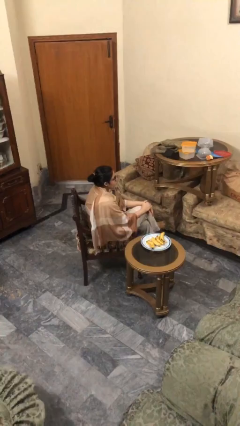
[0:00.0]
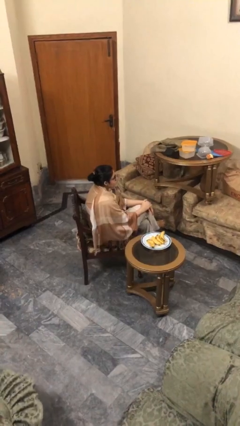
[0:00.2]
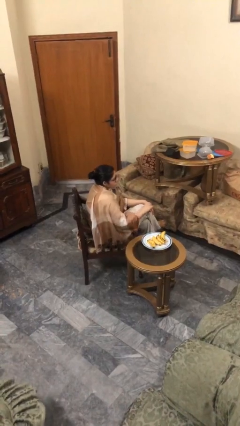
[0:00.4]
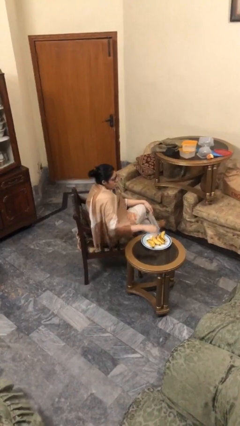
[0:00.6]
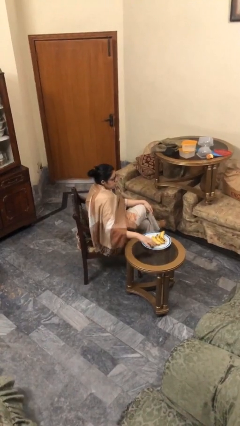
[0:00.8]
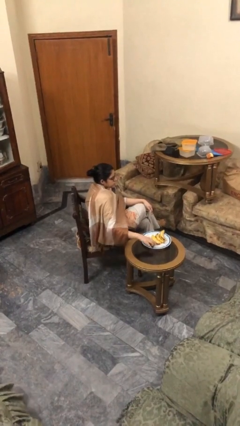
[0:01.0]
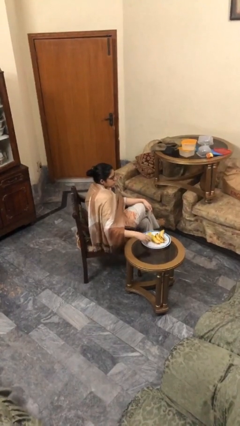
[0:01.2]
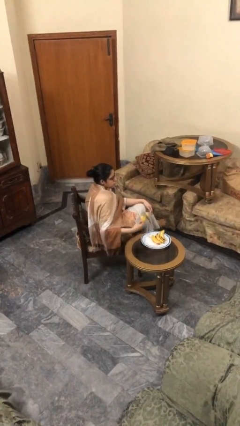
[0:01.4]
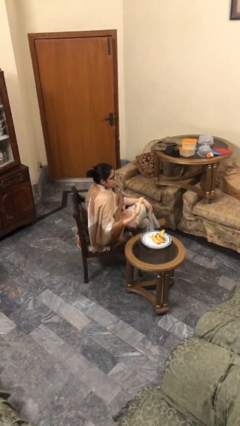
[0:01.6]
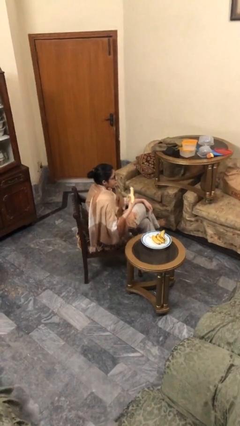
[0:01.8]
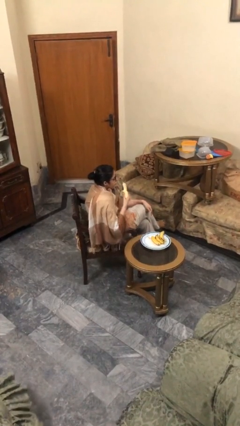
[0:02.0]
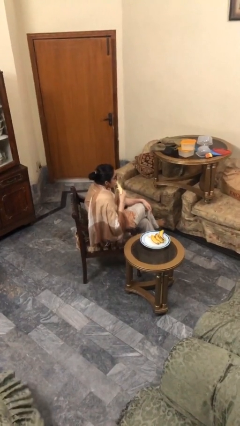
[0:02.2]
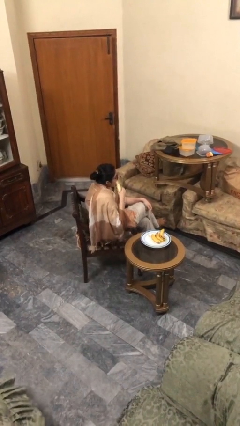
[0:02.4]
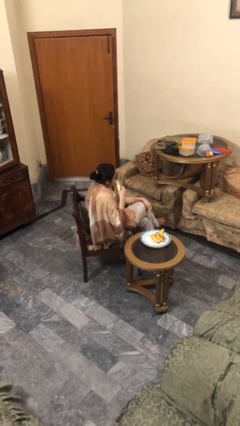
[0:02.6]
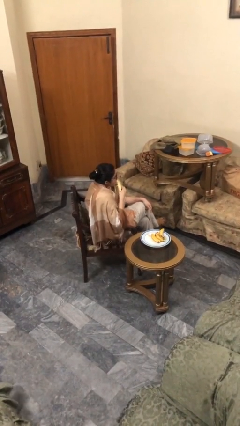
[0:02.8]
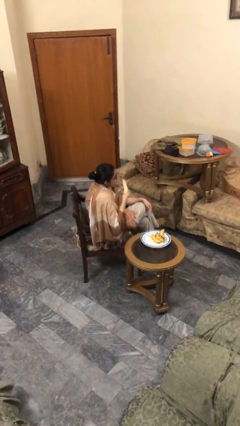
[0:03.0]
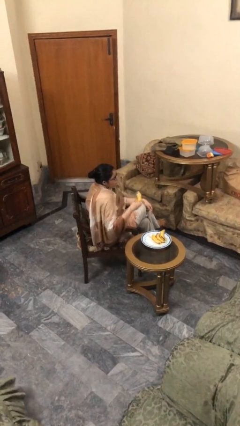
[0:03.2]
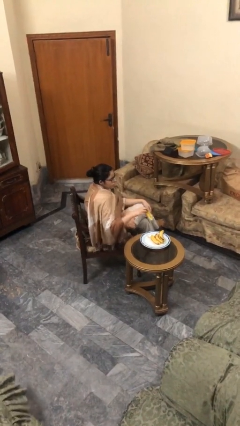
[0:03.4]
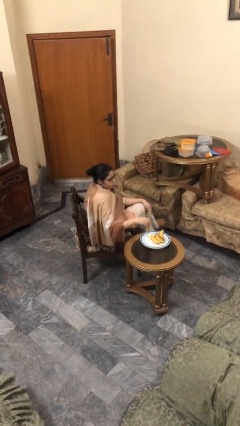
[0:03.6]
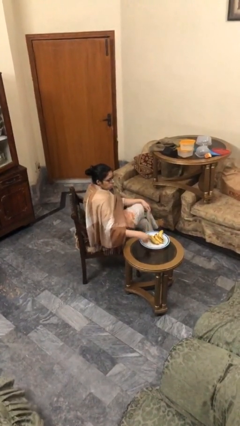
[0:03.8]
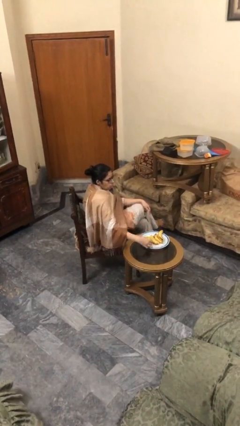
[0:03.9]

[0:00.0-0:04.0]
person eats banana

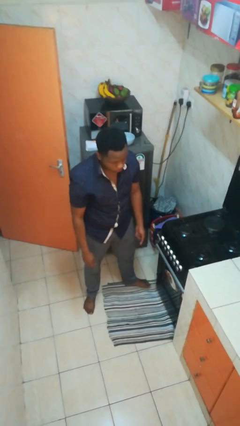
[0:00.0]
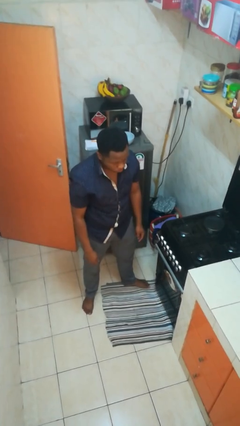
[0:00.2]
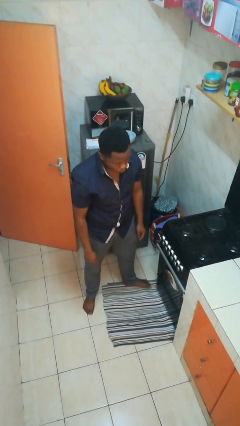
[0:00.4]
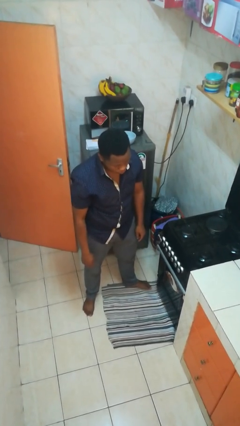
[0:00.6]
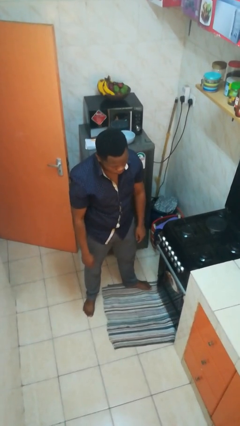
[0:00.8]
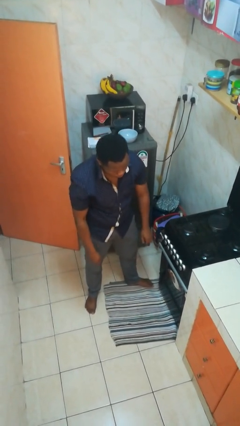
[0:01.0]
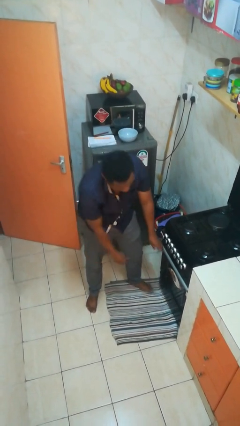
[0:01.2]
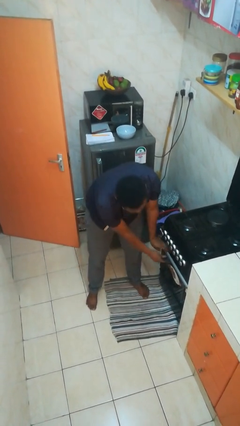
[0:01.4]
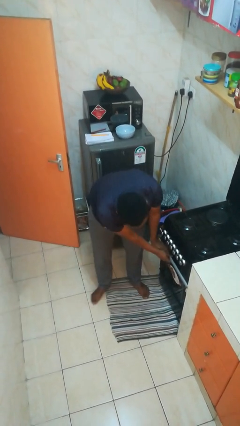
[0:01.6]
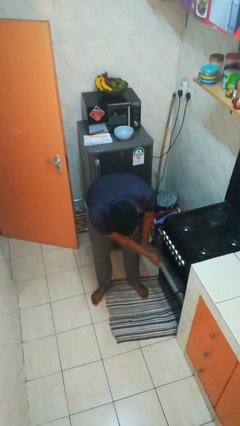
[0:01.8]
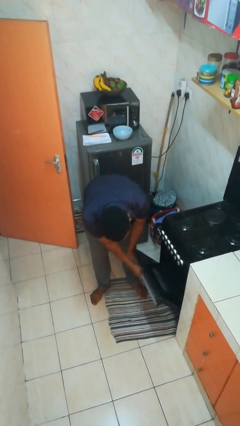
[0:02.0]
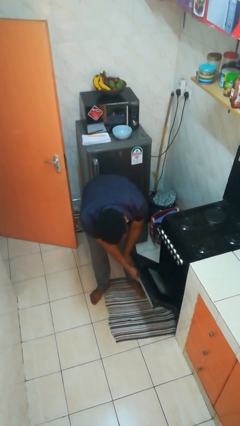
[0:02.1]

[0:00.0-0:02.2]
person opens oven door

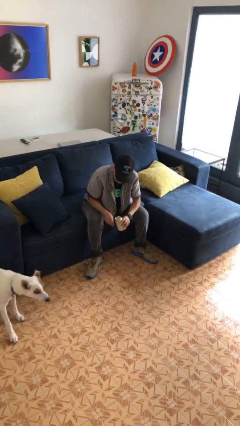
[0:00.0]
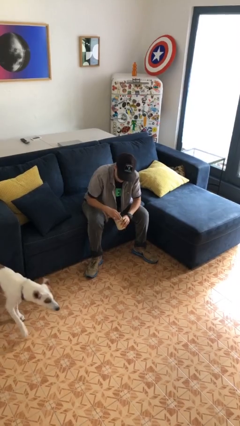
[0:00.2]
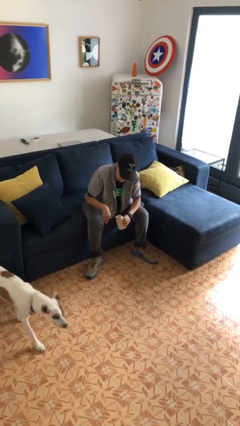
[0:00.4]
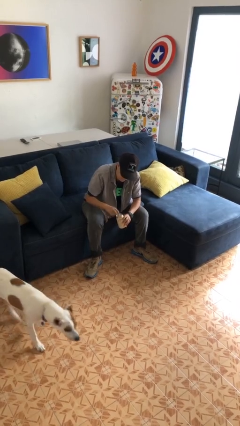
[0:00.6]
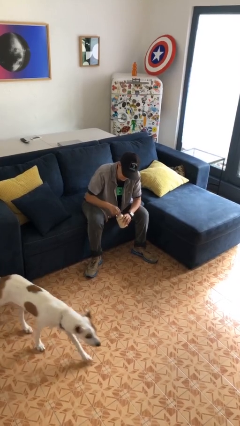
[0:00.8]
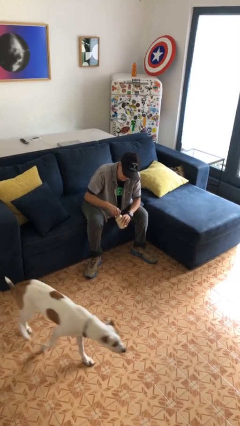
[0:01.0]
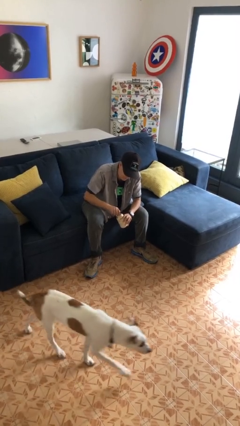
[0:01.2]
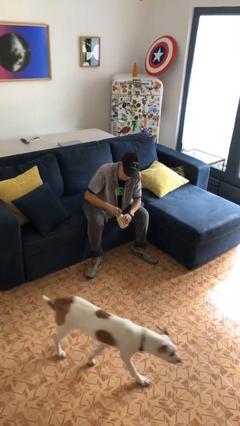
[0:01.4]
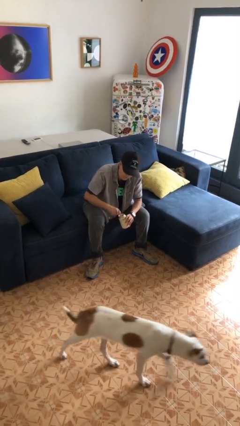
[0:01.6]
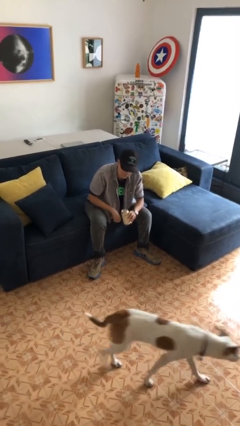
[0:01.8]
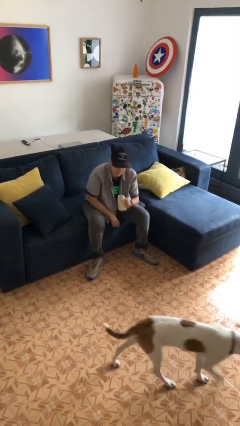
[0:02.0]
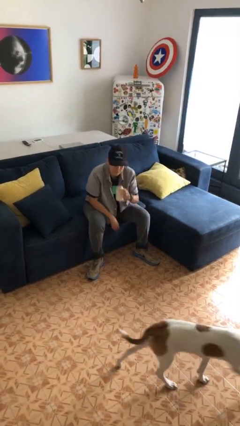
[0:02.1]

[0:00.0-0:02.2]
person opens beverage can

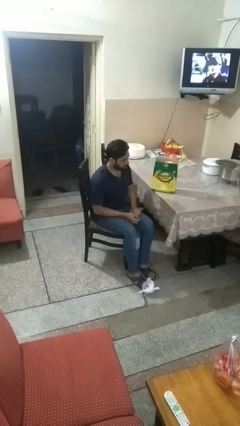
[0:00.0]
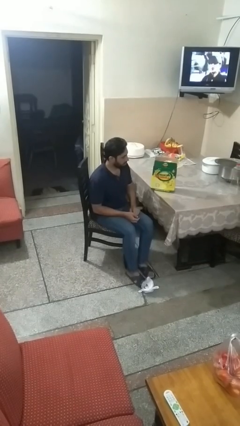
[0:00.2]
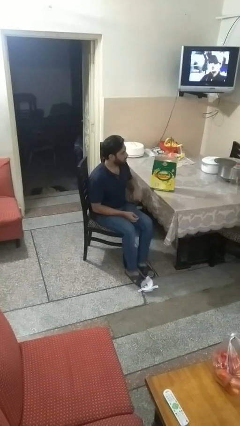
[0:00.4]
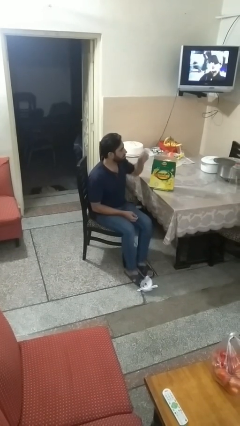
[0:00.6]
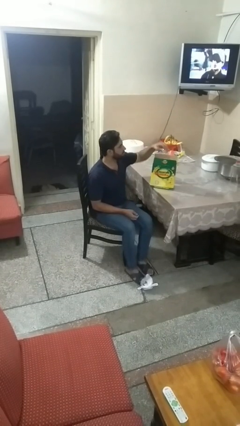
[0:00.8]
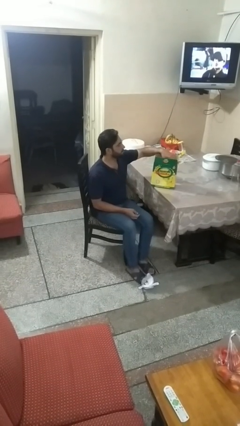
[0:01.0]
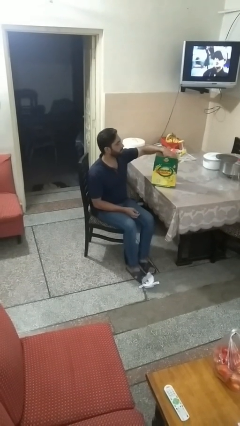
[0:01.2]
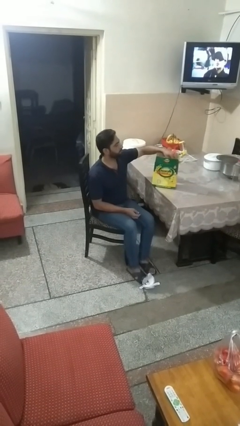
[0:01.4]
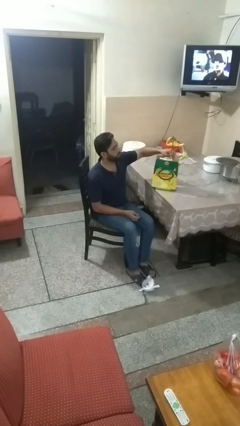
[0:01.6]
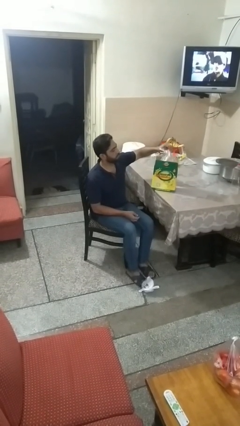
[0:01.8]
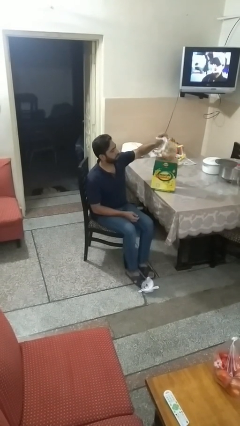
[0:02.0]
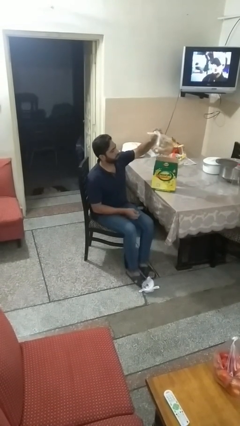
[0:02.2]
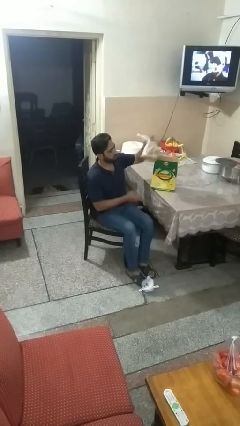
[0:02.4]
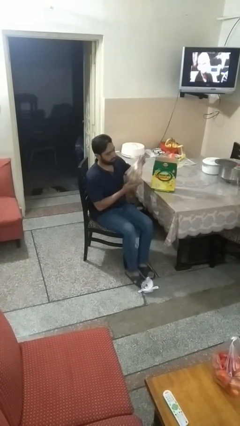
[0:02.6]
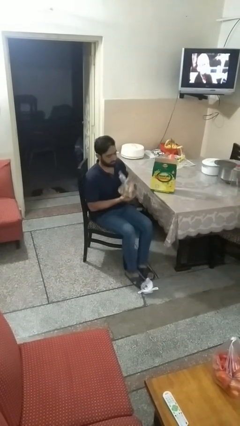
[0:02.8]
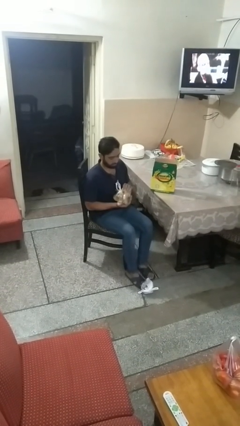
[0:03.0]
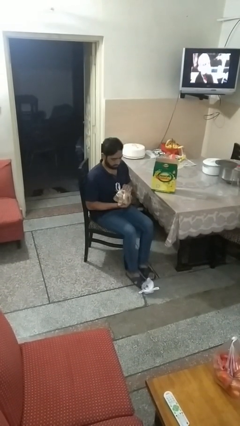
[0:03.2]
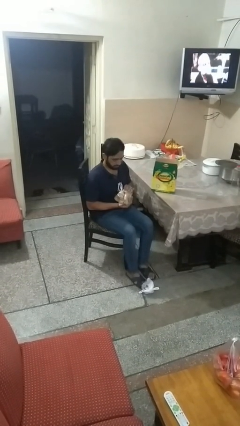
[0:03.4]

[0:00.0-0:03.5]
person takes object from box

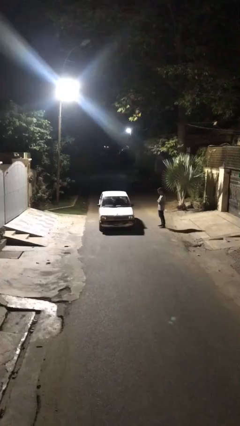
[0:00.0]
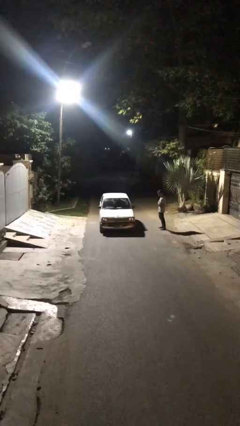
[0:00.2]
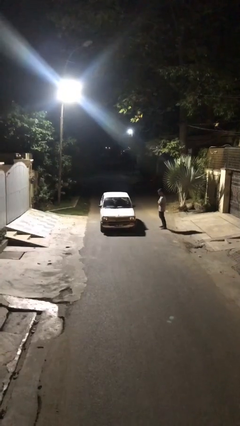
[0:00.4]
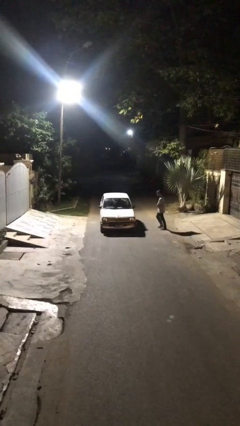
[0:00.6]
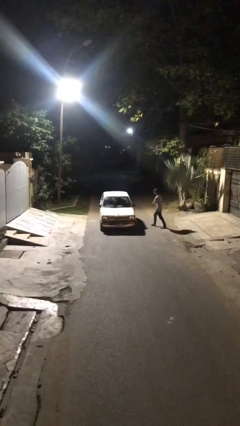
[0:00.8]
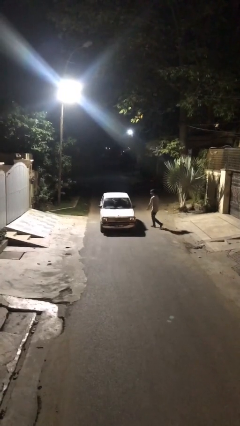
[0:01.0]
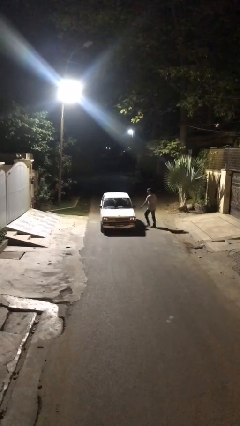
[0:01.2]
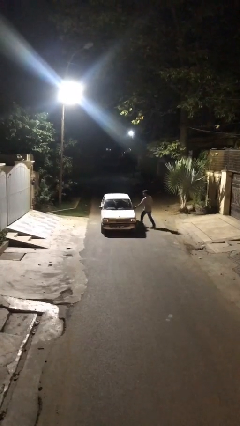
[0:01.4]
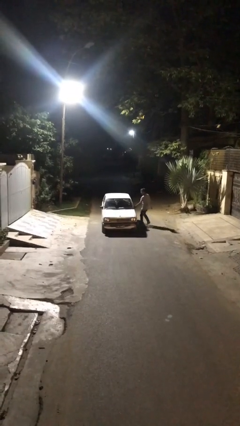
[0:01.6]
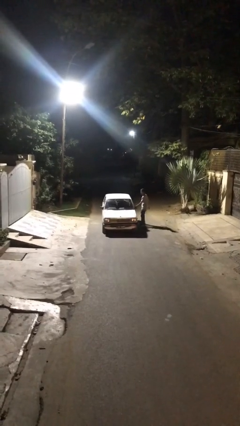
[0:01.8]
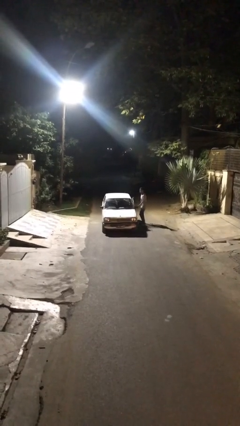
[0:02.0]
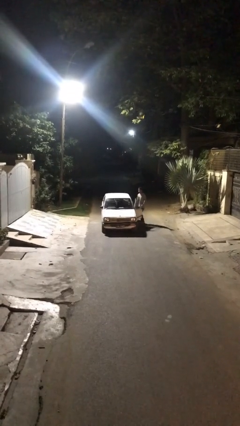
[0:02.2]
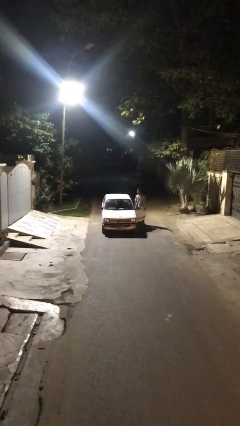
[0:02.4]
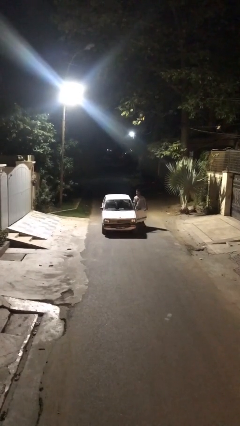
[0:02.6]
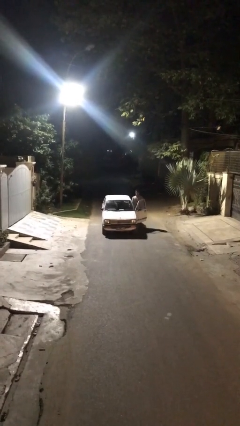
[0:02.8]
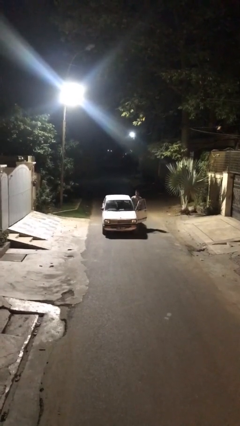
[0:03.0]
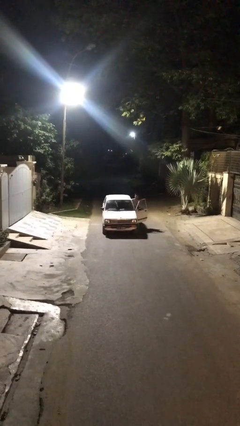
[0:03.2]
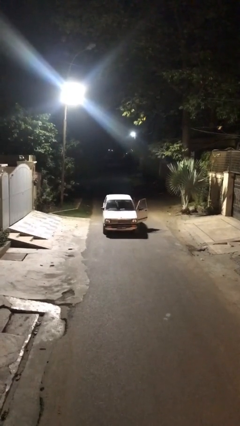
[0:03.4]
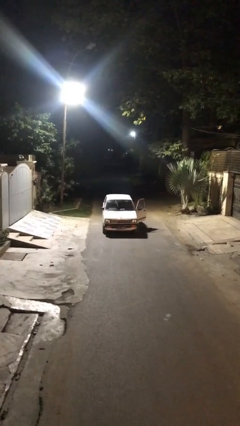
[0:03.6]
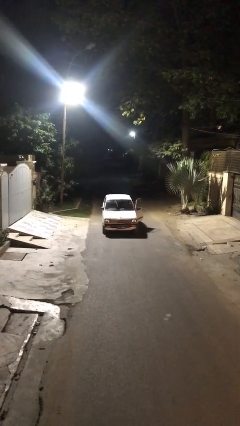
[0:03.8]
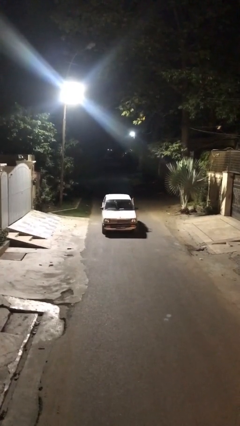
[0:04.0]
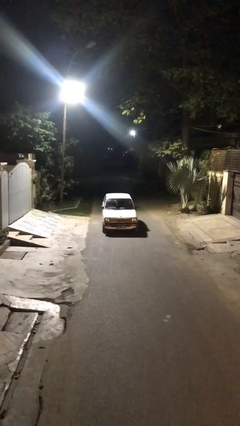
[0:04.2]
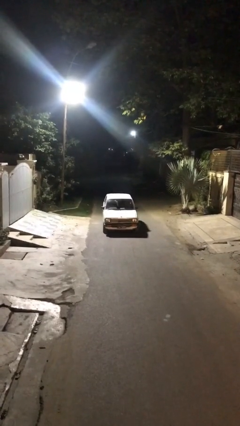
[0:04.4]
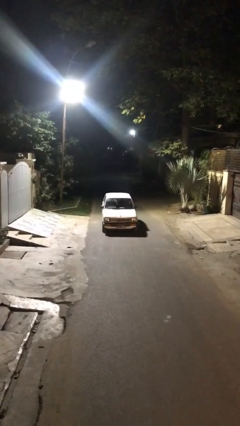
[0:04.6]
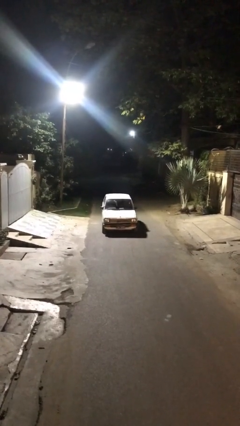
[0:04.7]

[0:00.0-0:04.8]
car picks up person

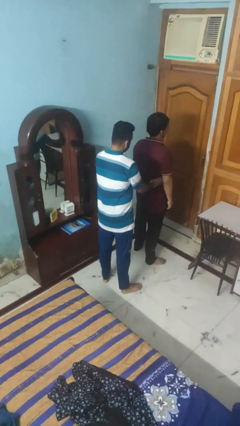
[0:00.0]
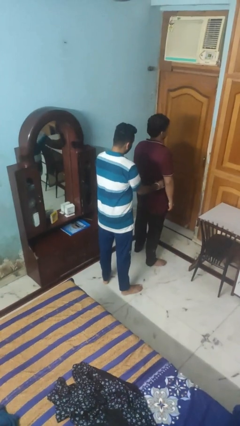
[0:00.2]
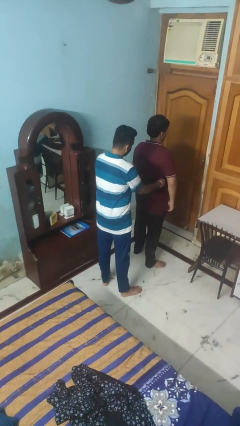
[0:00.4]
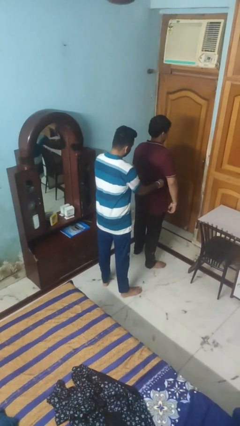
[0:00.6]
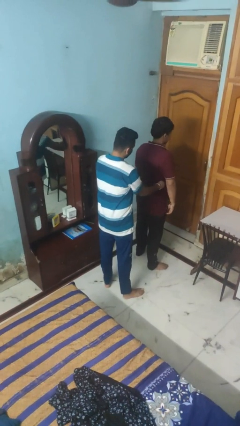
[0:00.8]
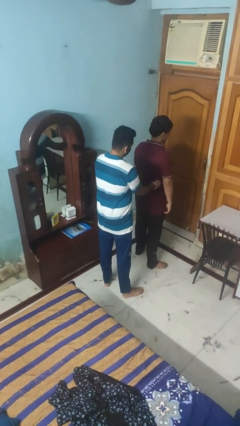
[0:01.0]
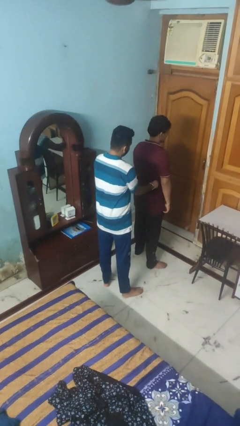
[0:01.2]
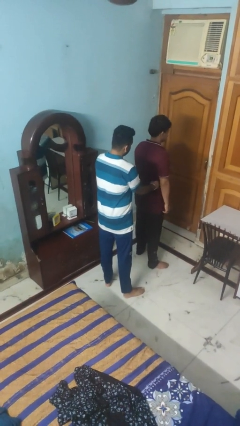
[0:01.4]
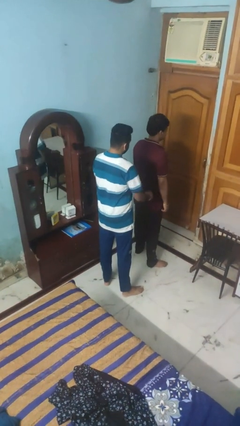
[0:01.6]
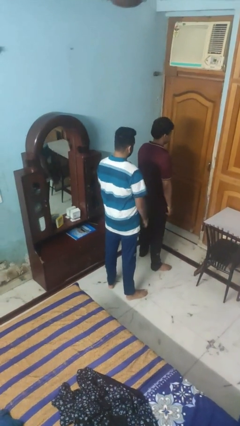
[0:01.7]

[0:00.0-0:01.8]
person tickles person
